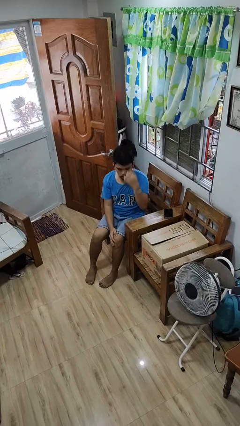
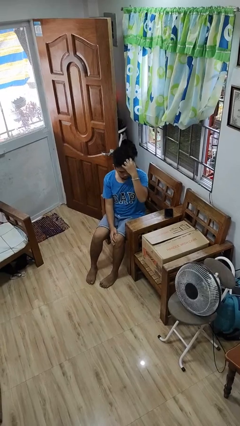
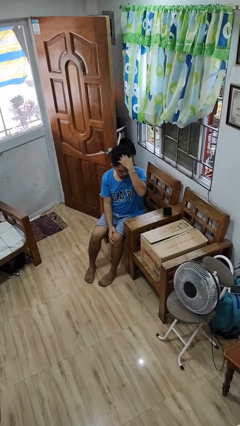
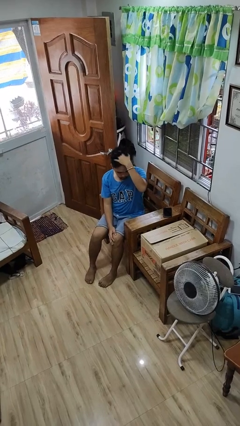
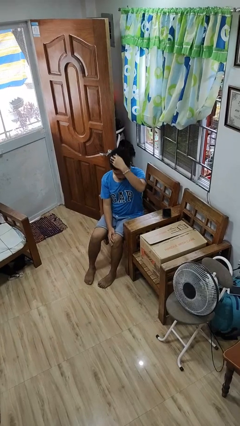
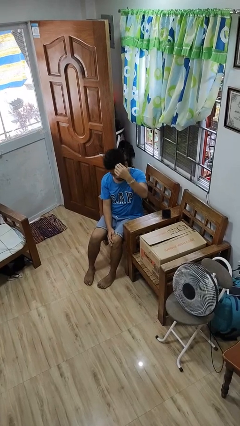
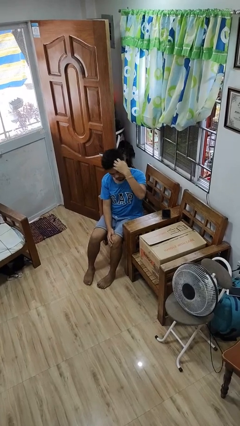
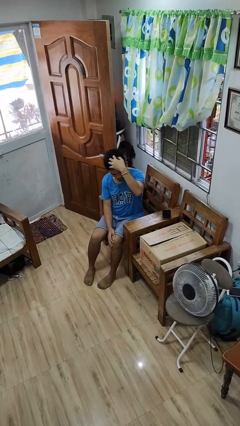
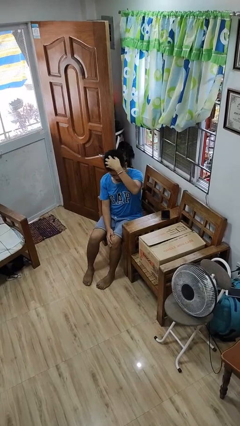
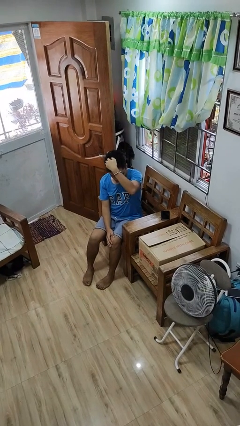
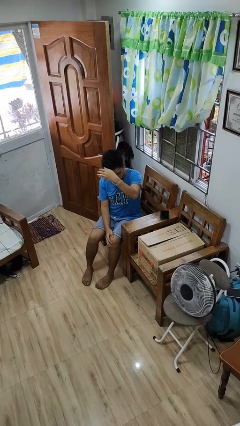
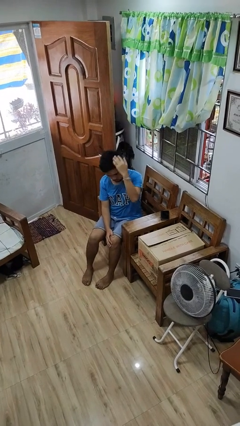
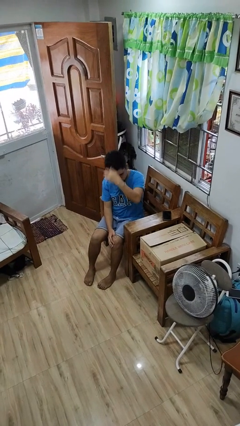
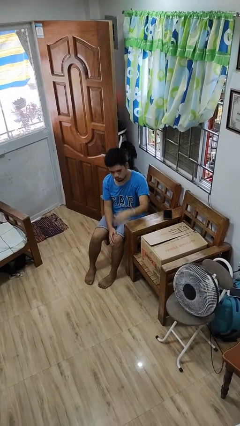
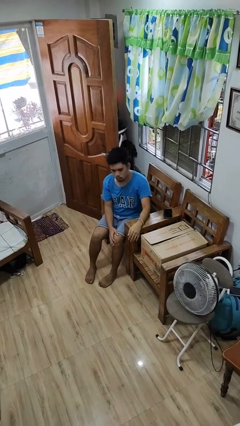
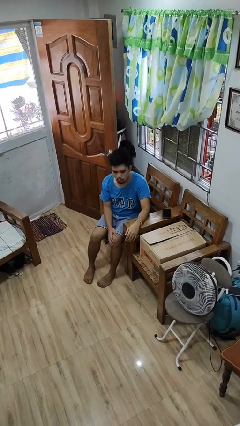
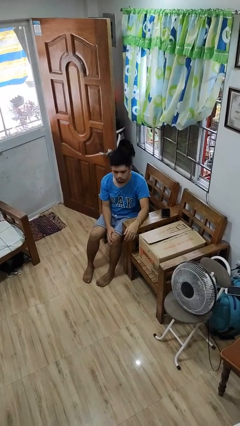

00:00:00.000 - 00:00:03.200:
person strokes hair

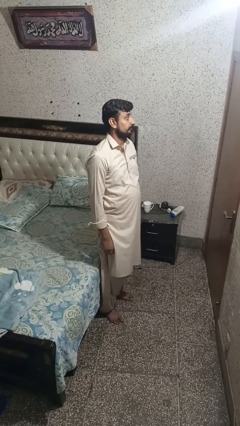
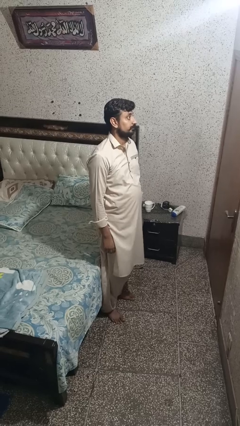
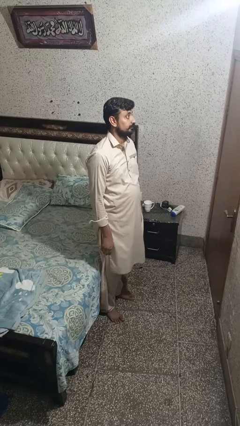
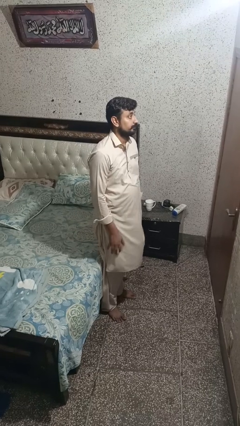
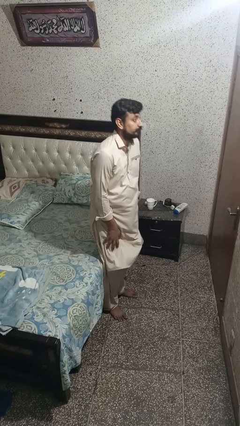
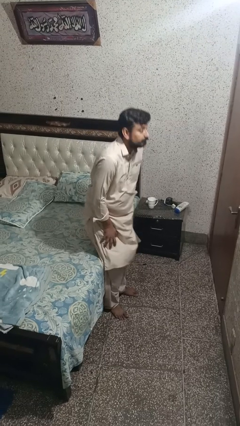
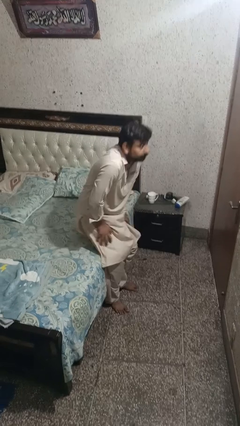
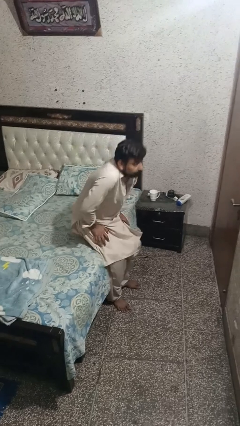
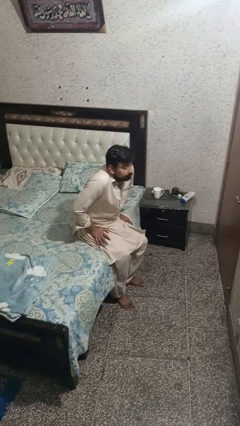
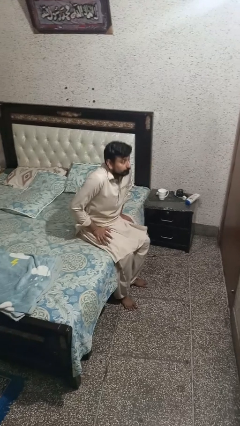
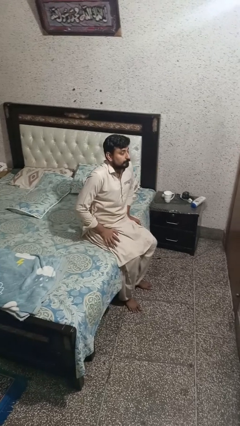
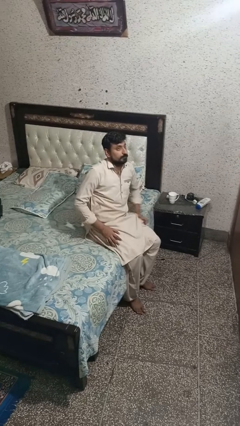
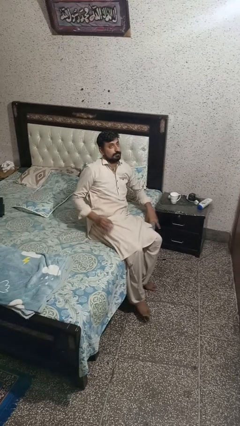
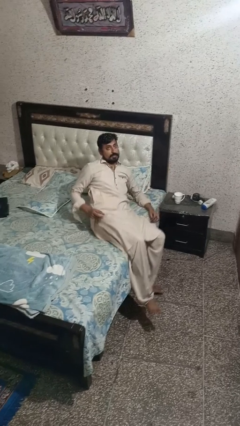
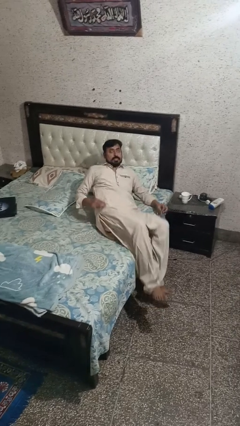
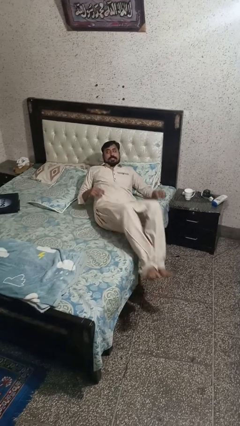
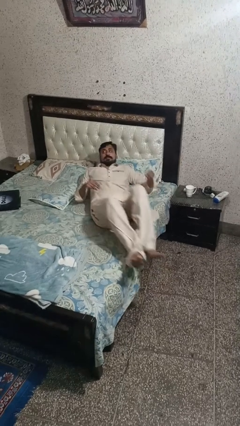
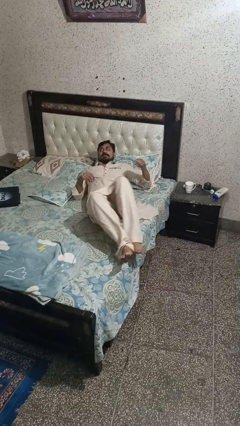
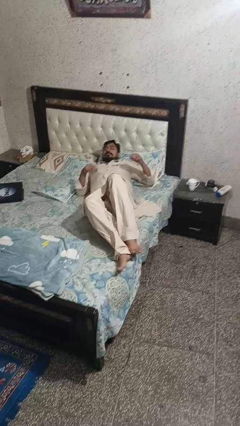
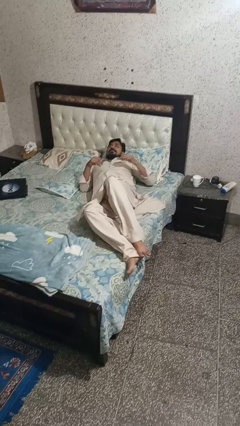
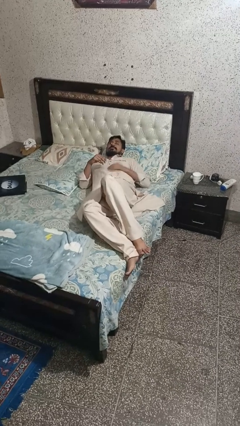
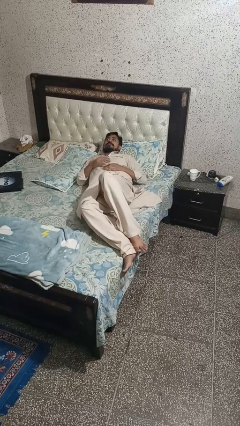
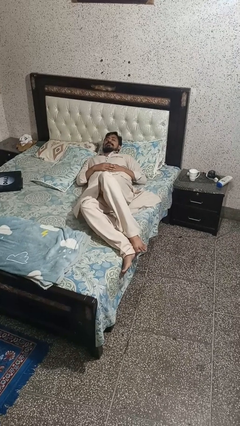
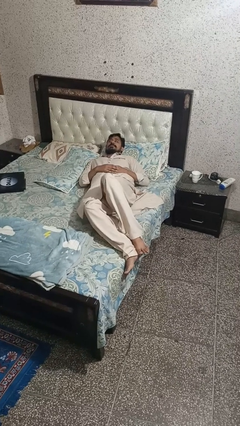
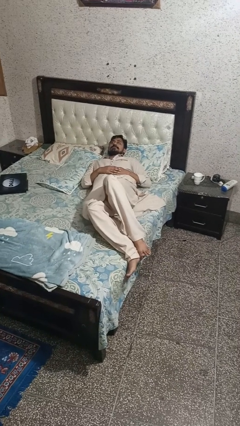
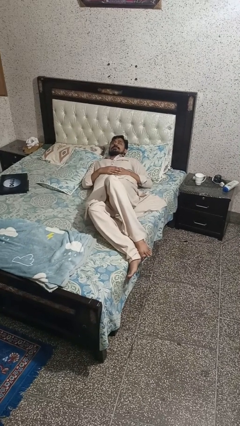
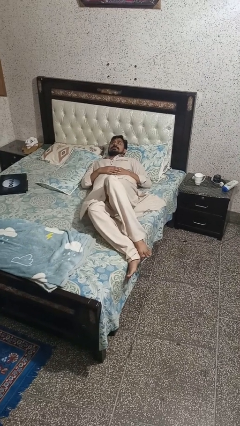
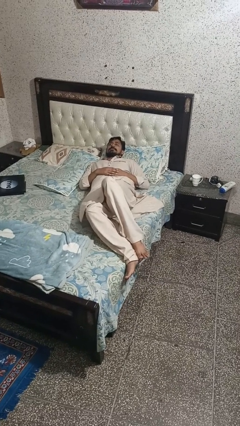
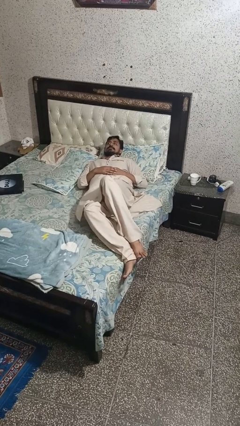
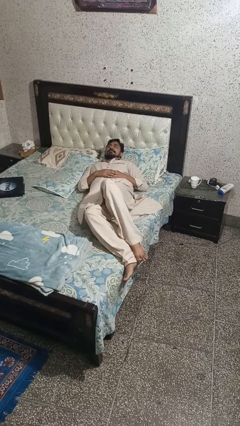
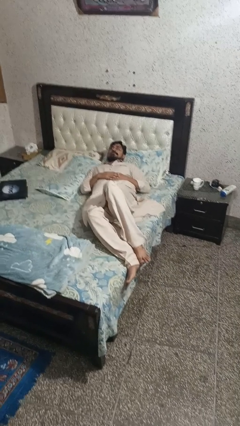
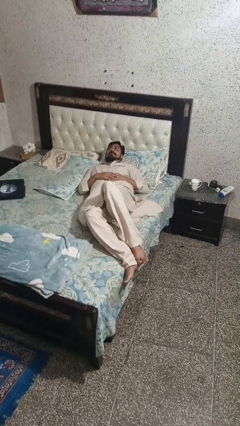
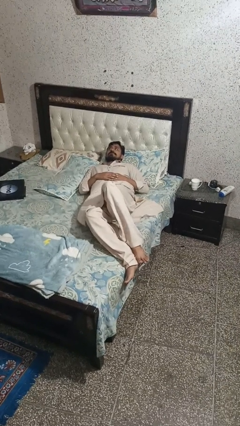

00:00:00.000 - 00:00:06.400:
person lies down on bed

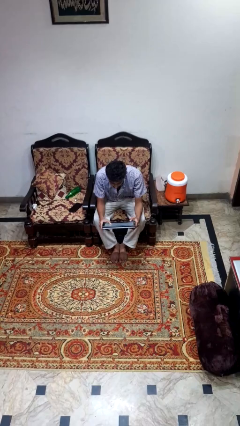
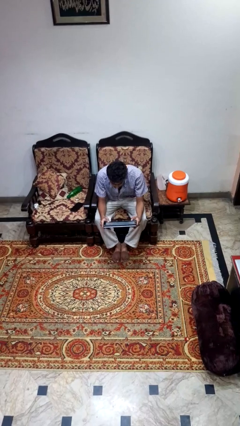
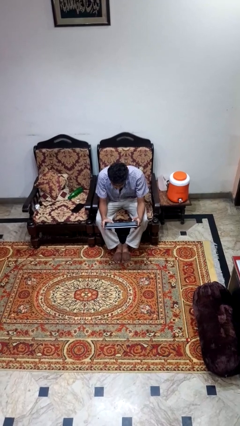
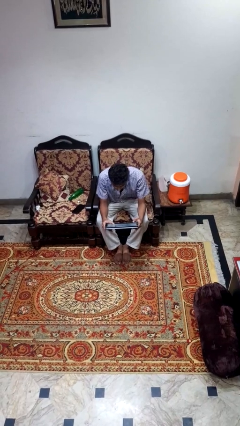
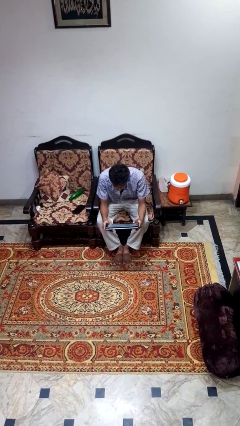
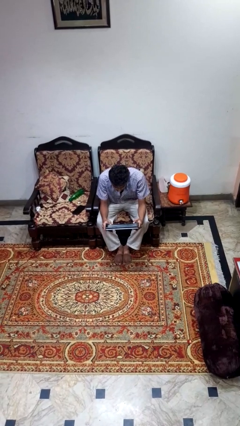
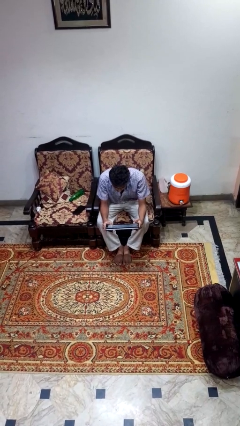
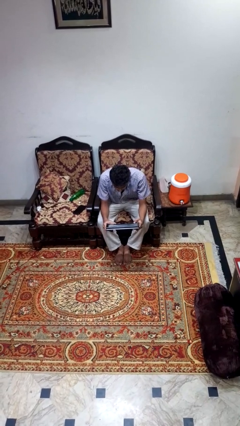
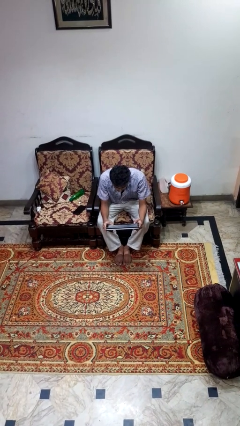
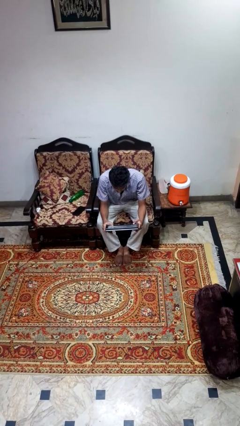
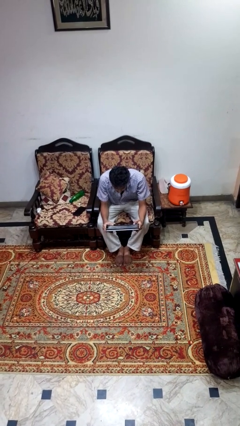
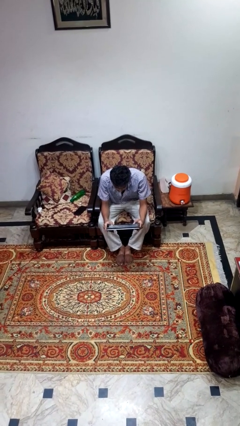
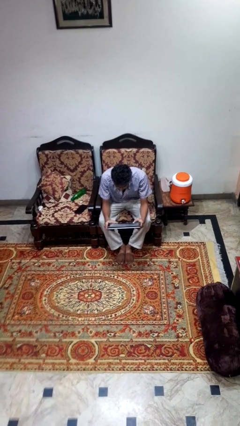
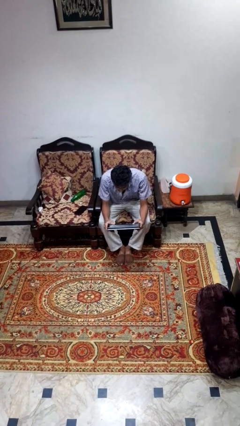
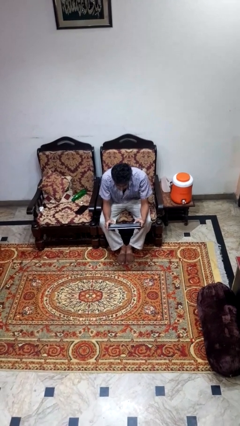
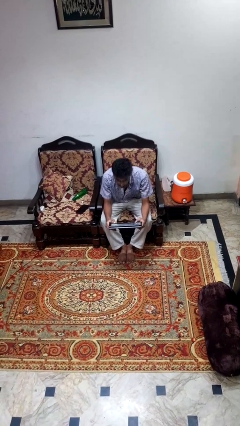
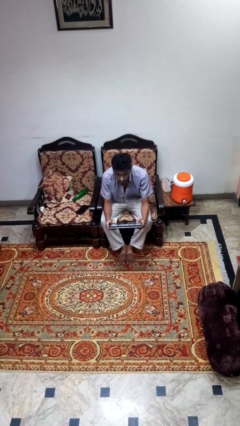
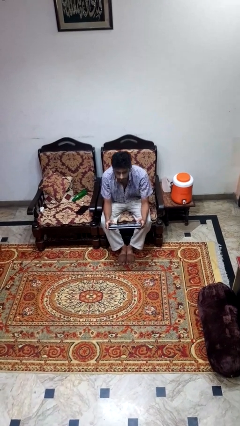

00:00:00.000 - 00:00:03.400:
person reads newspaper

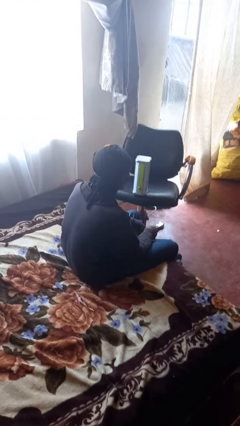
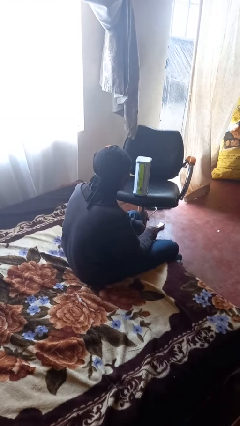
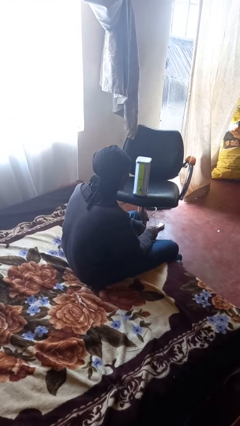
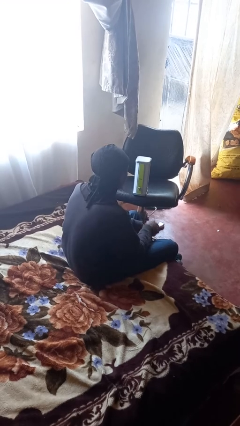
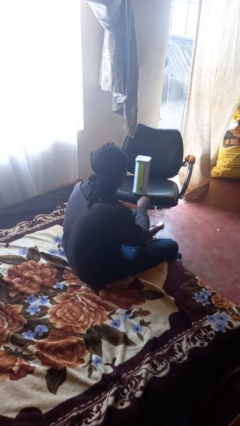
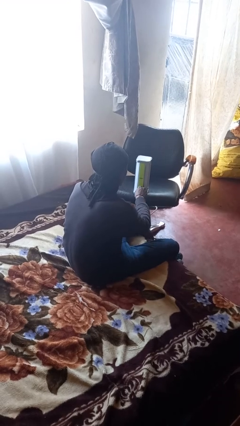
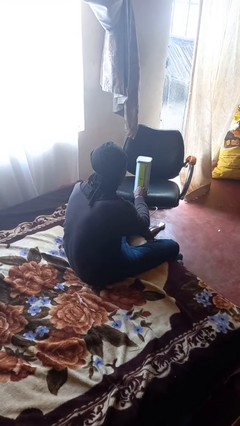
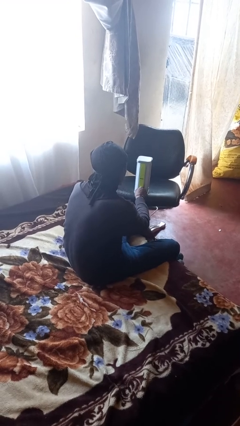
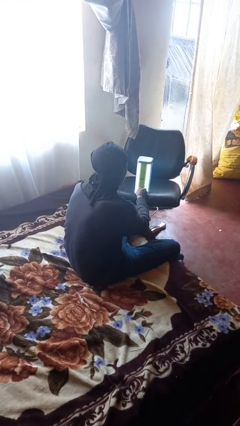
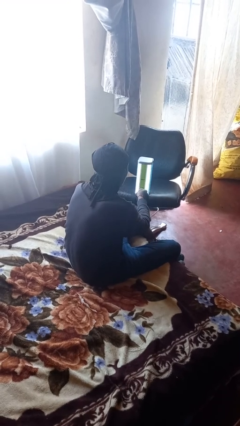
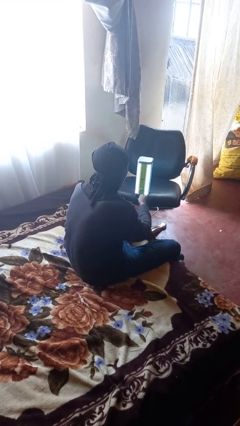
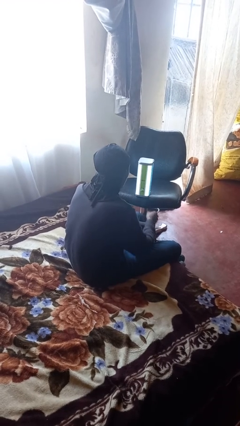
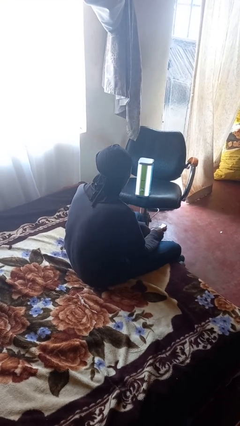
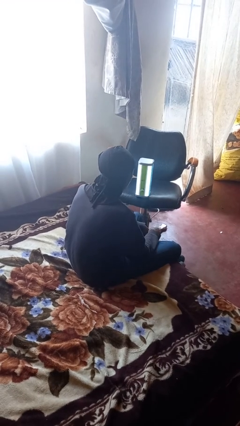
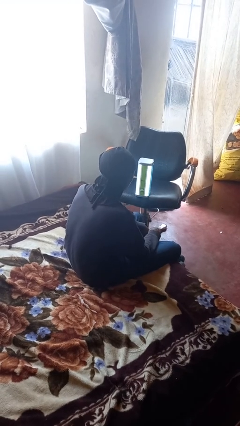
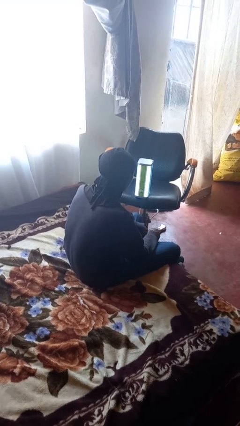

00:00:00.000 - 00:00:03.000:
person turns on lamp

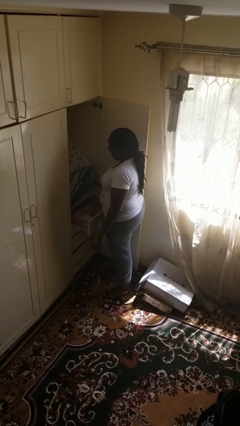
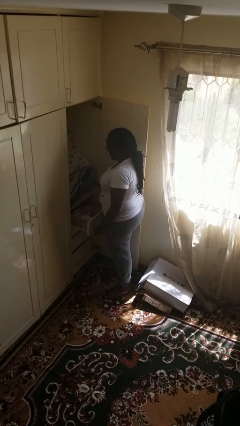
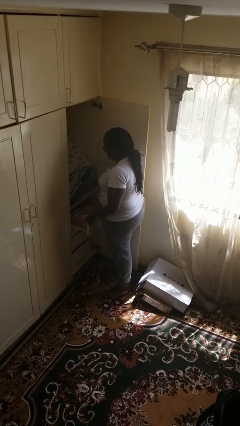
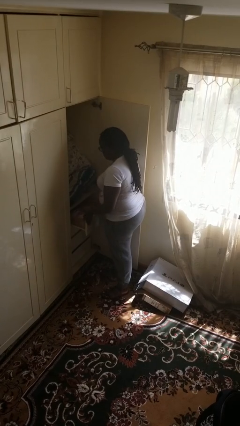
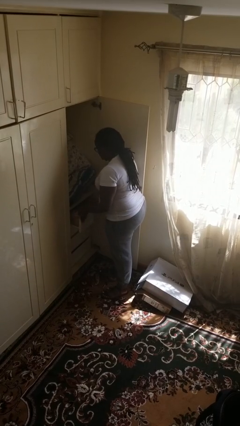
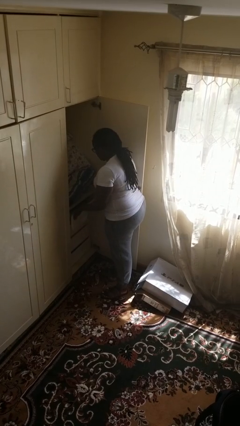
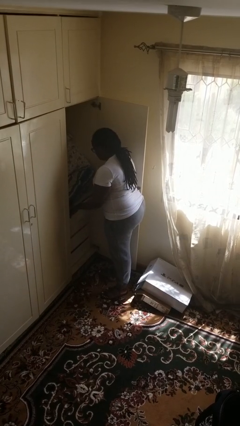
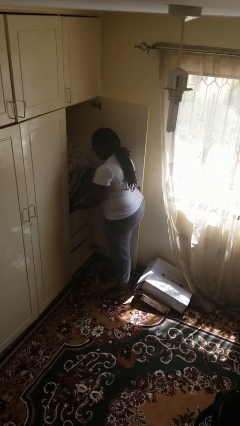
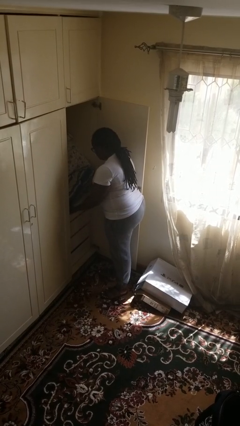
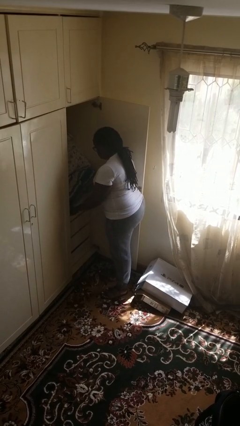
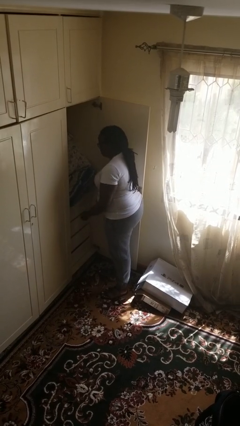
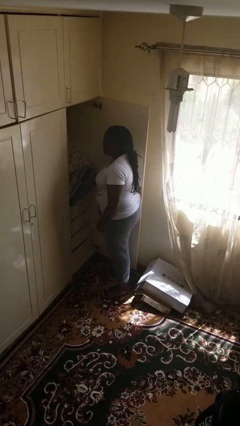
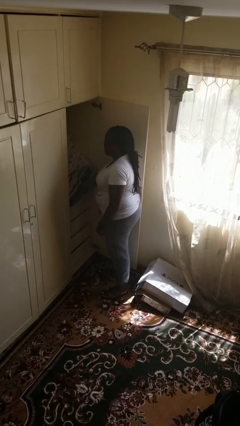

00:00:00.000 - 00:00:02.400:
person closes dresser drawer
